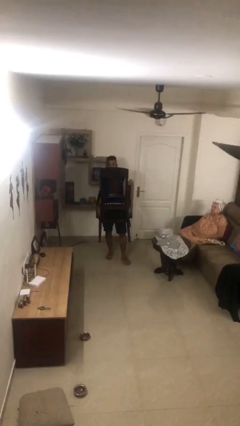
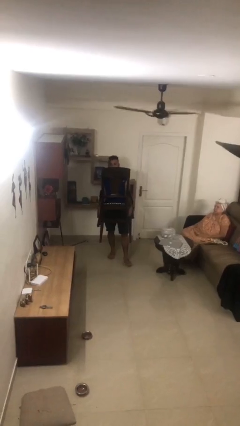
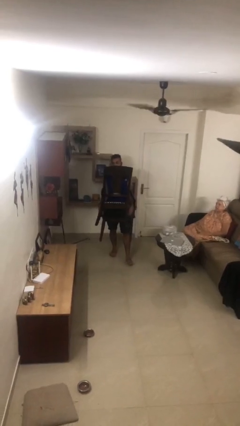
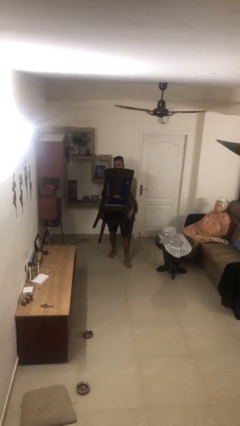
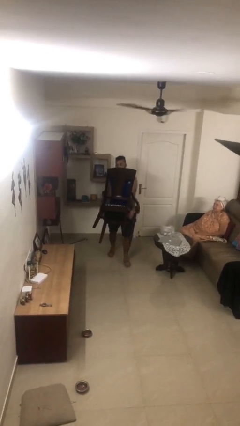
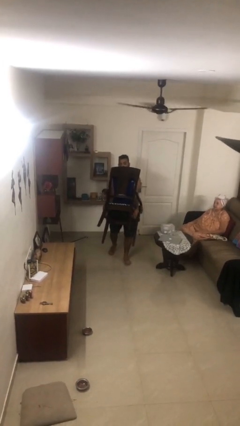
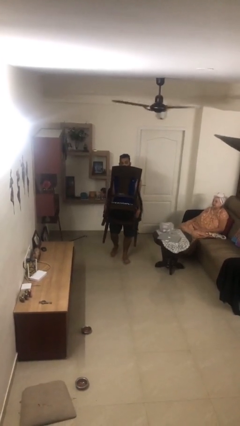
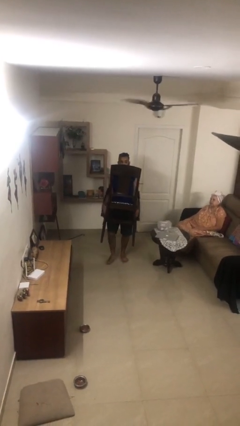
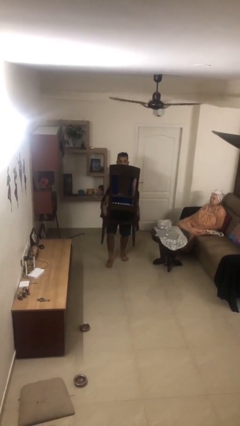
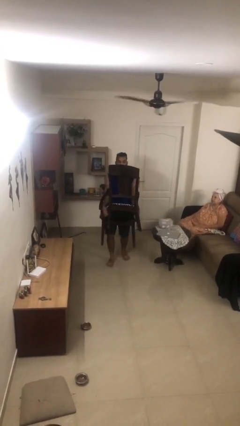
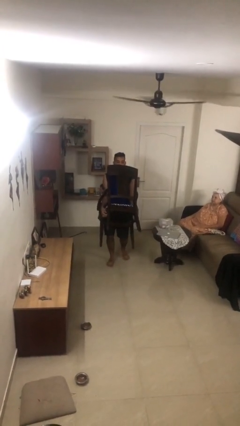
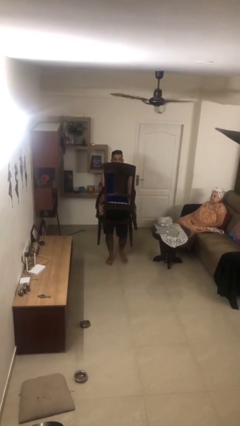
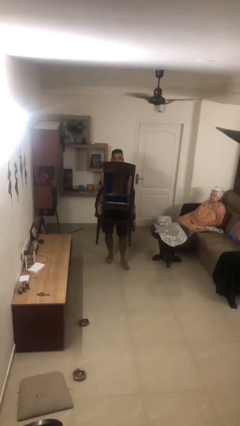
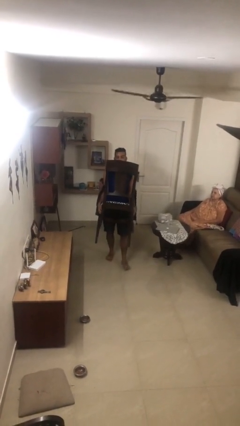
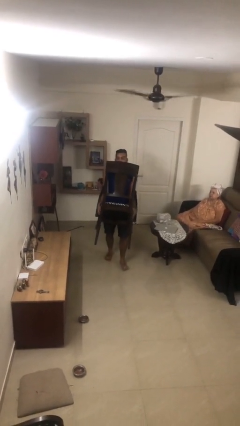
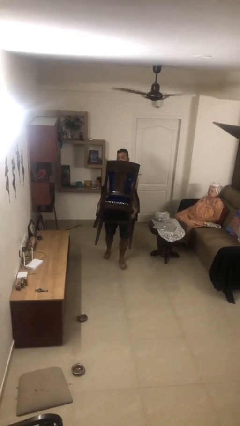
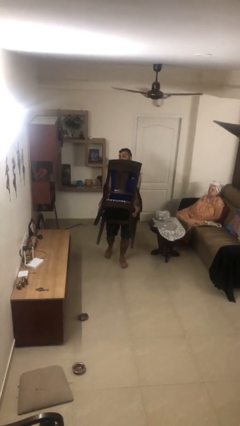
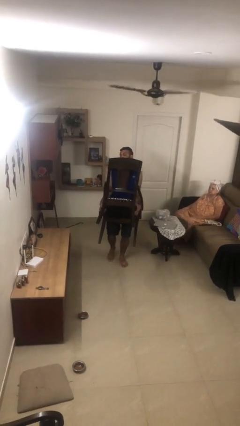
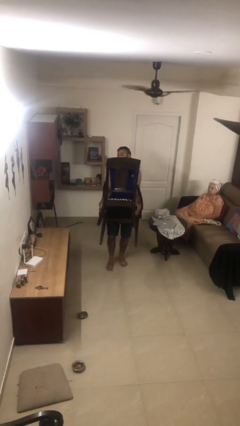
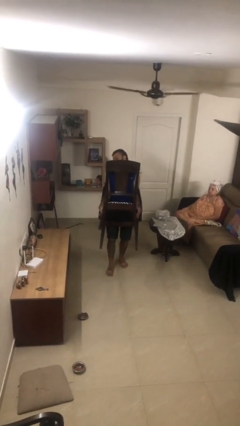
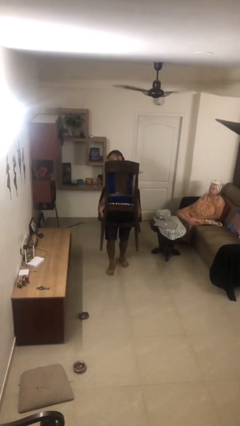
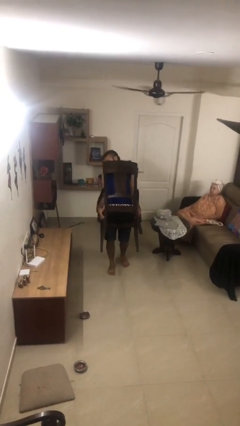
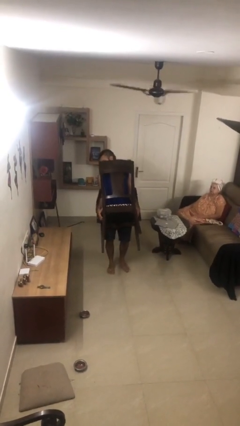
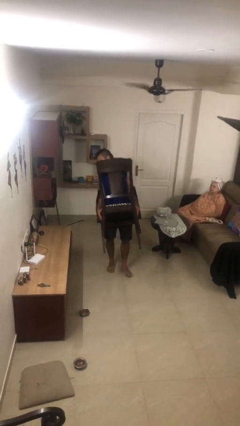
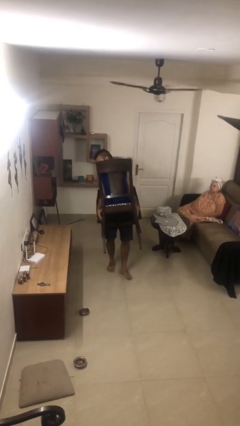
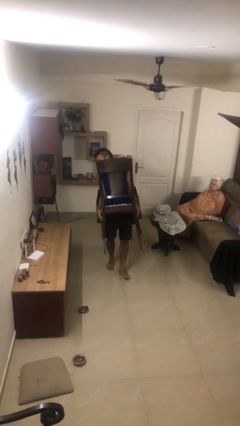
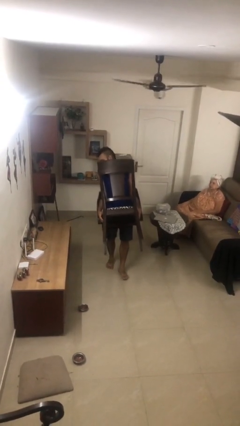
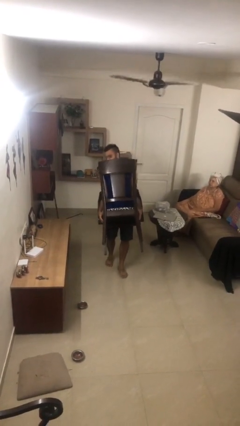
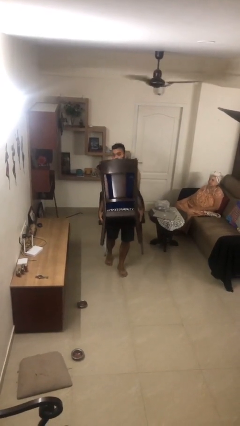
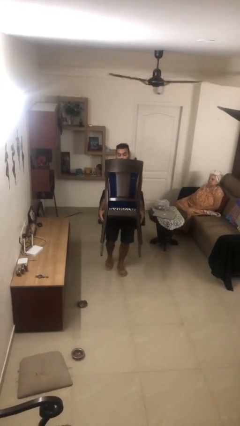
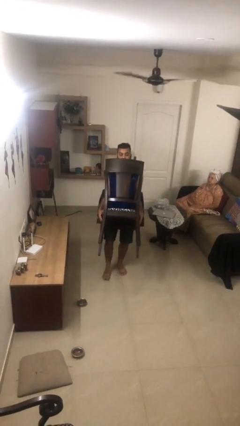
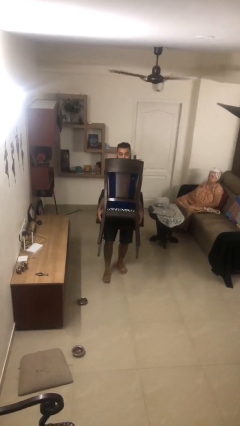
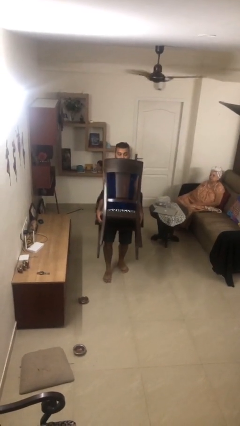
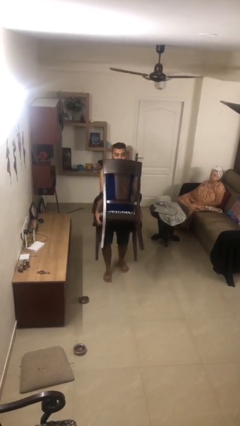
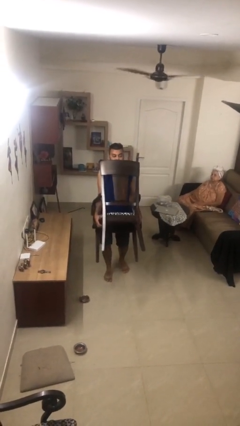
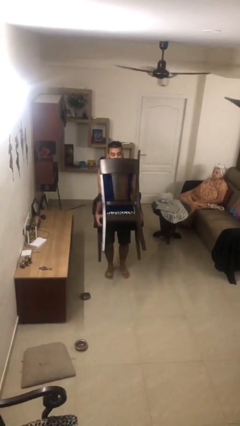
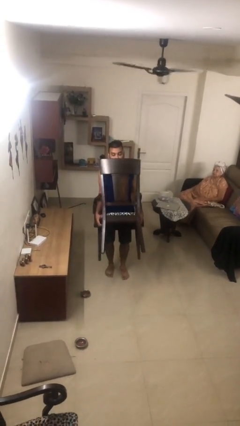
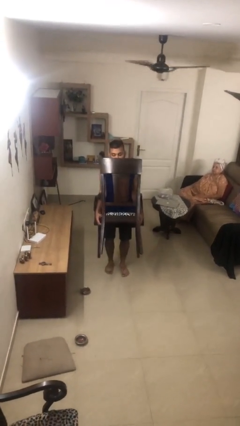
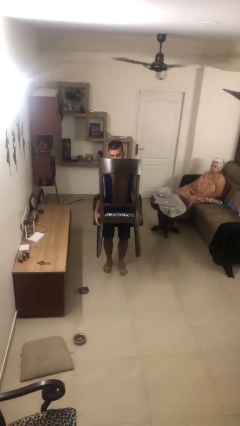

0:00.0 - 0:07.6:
person carries heavy object

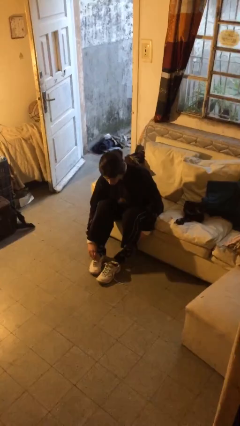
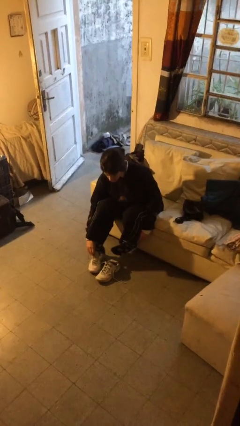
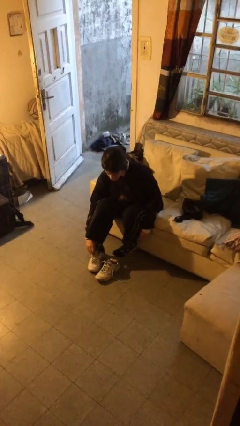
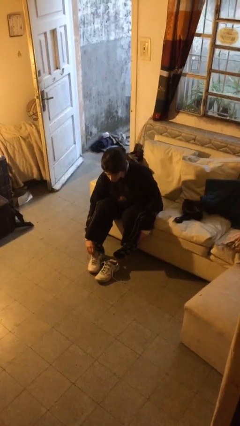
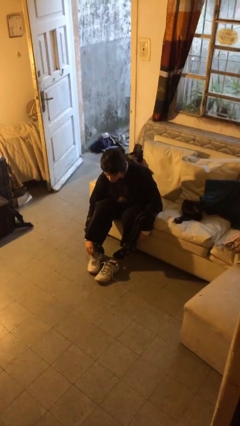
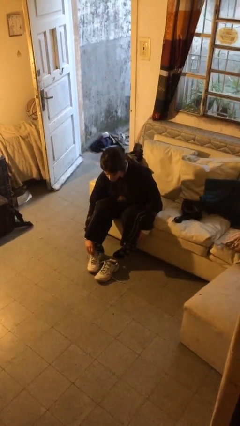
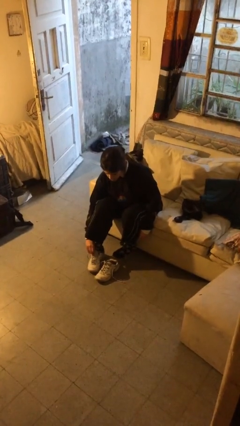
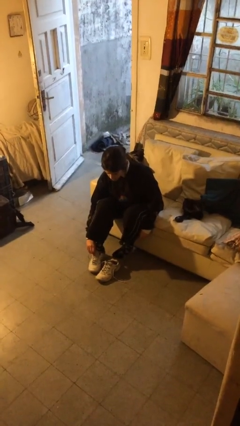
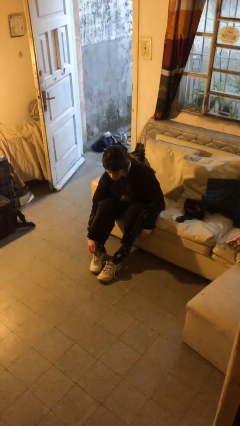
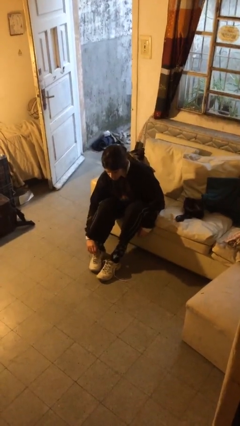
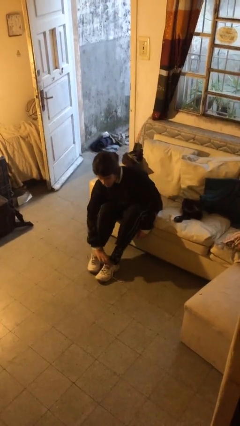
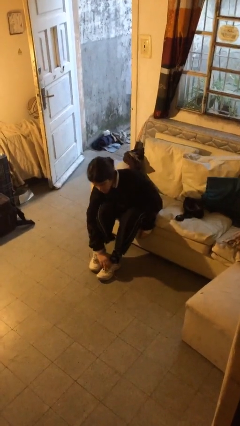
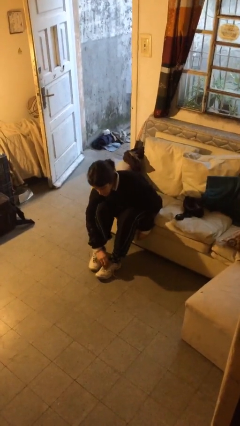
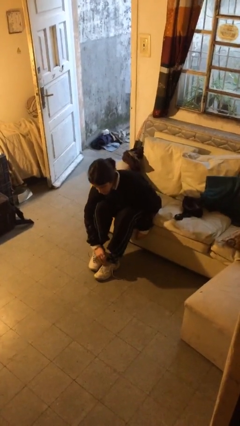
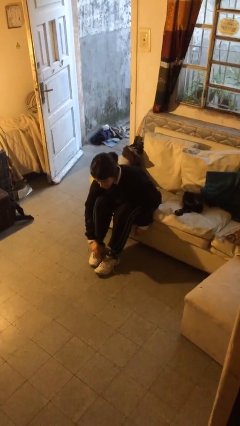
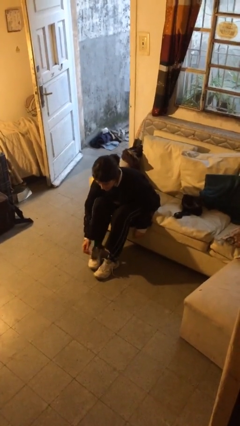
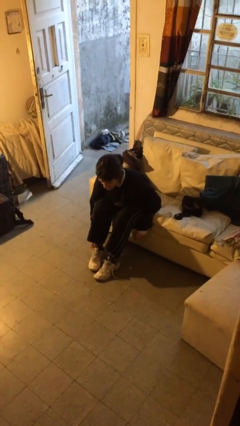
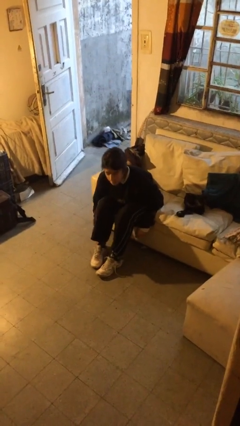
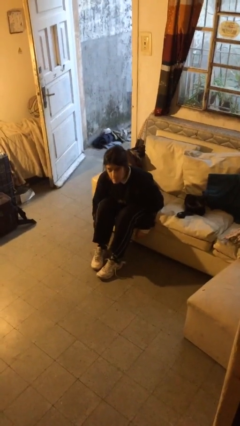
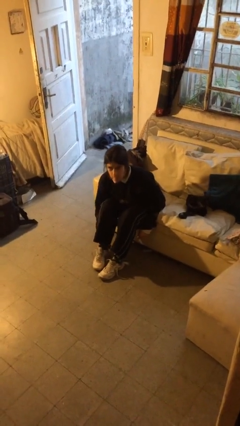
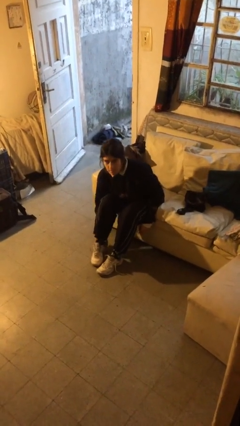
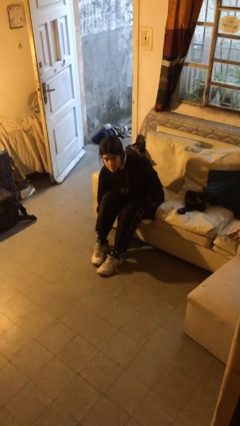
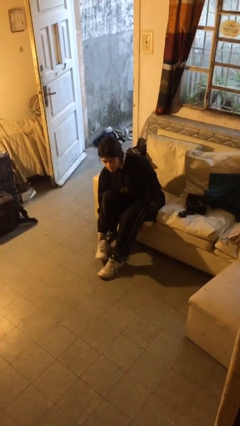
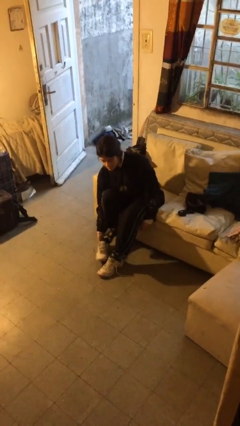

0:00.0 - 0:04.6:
person puts on shoes

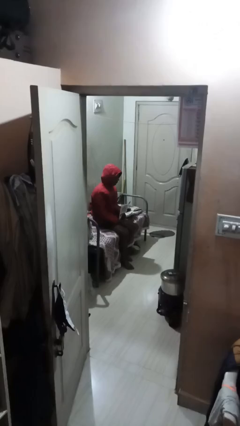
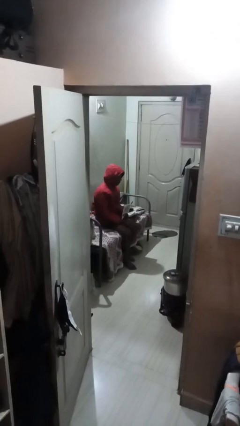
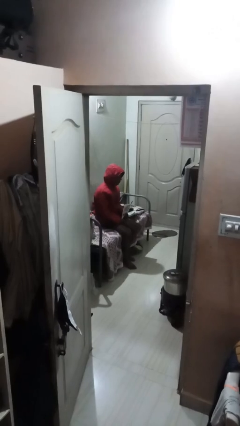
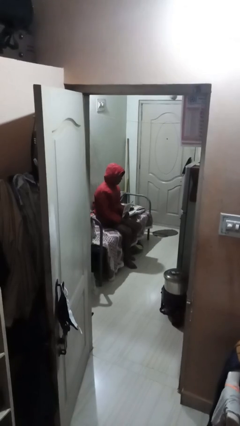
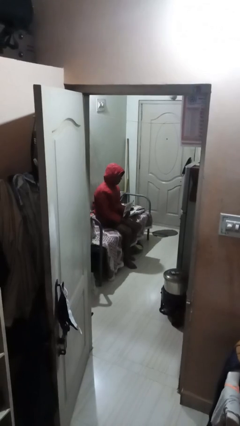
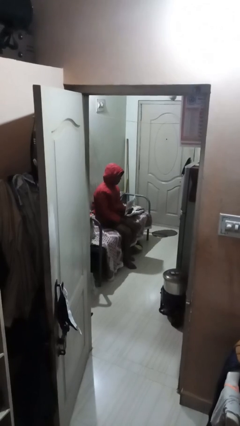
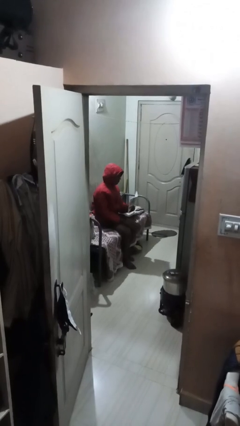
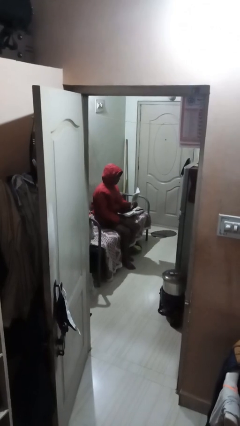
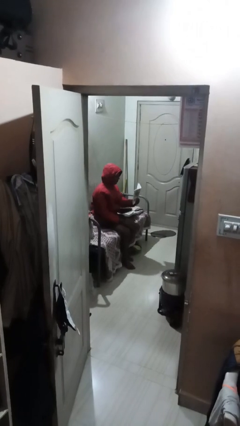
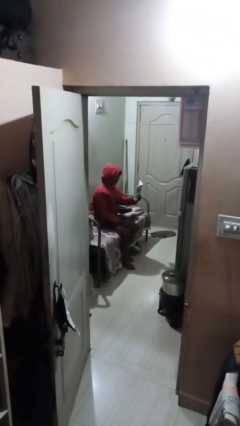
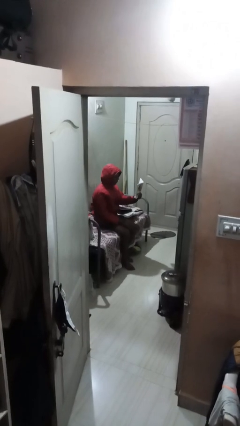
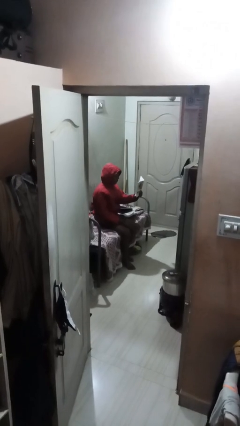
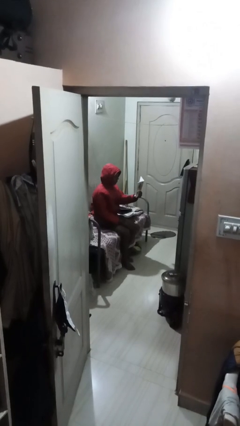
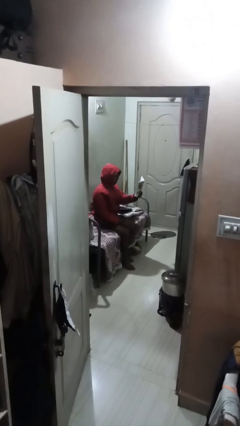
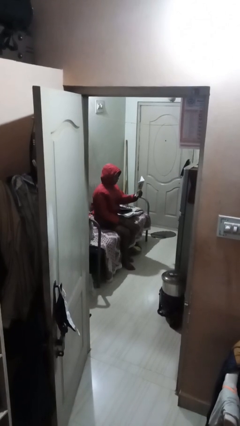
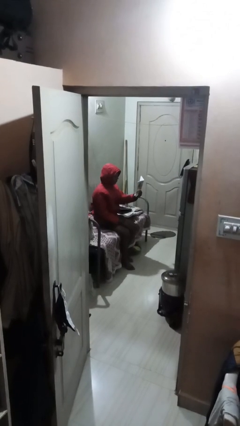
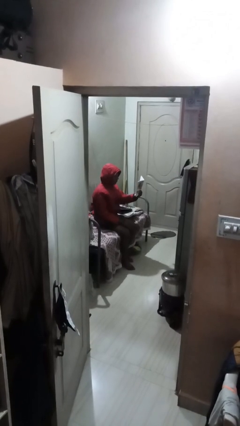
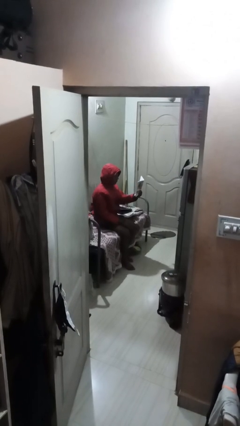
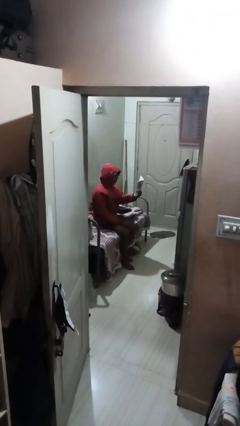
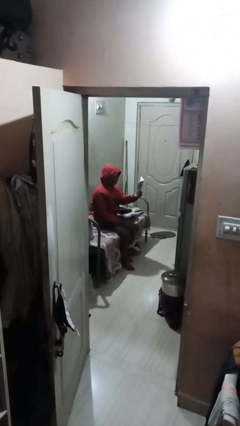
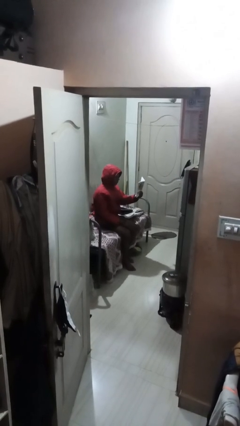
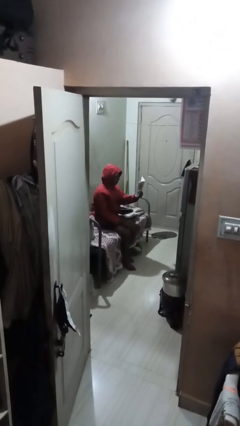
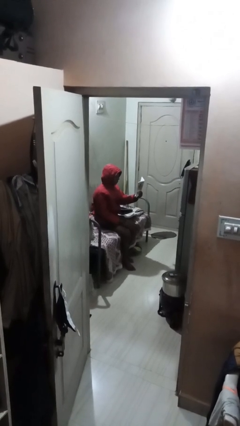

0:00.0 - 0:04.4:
person reads document

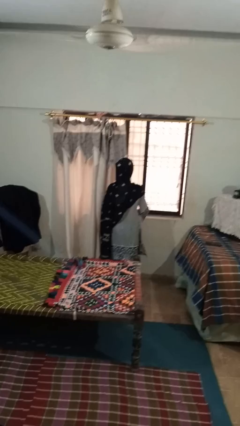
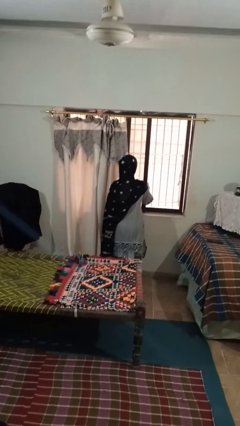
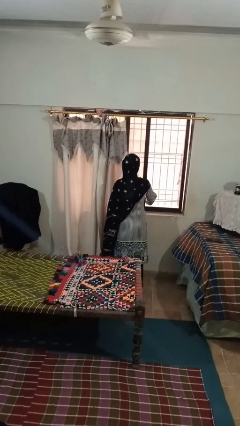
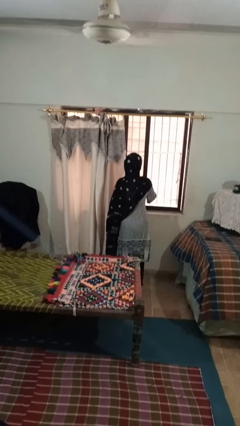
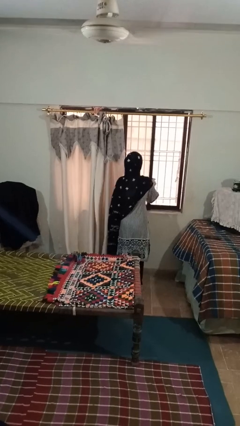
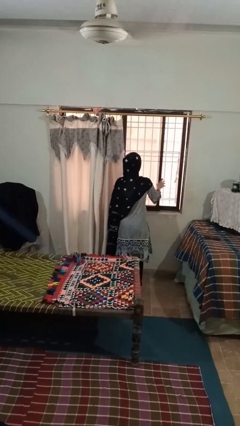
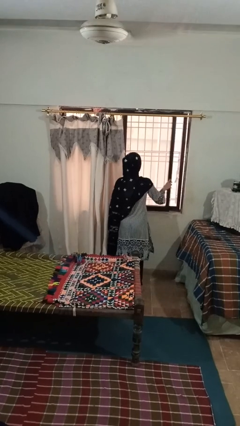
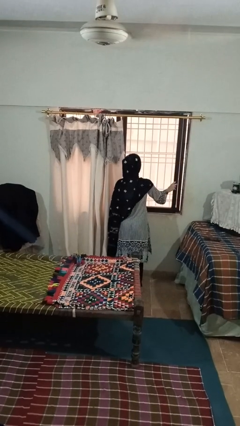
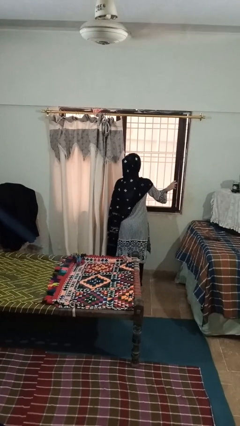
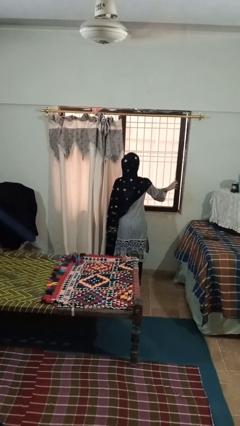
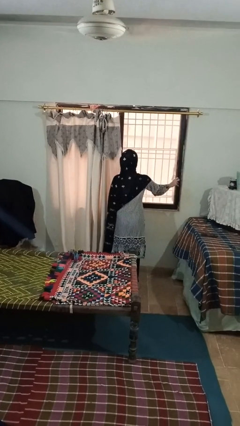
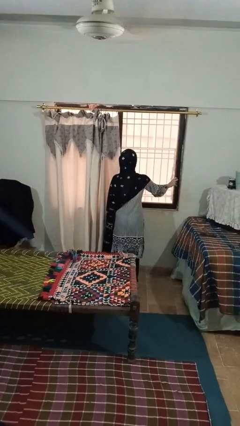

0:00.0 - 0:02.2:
person closes home window
